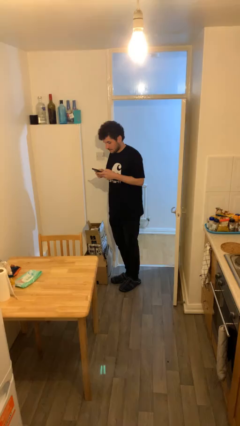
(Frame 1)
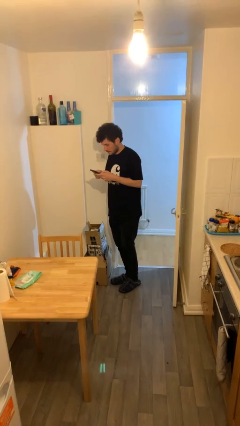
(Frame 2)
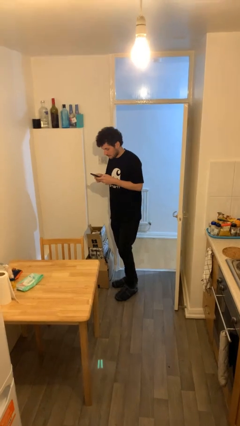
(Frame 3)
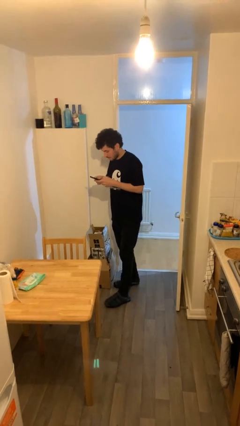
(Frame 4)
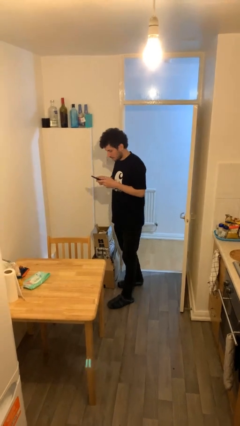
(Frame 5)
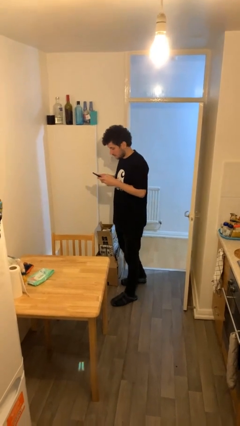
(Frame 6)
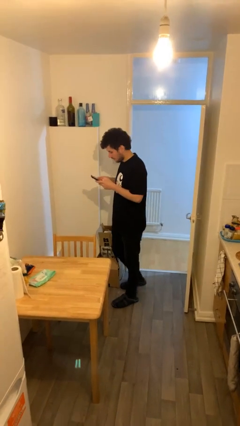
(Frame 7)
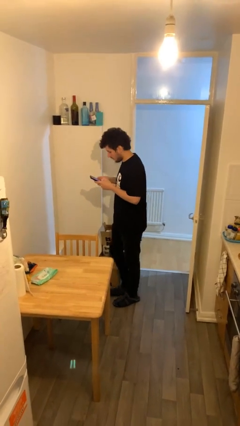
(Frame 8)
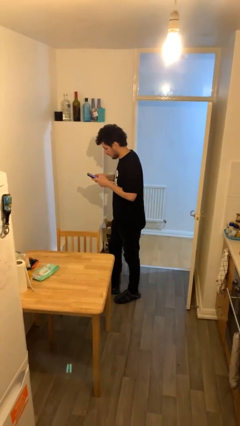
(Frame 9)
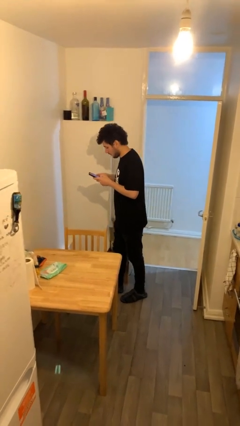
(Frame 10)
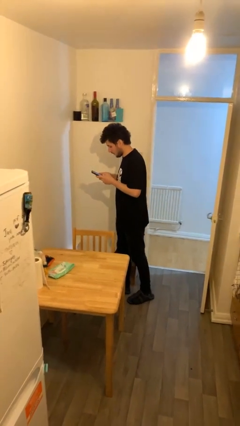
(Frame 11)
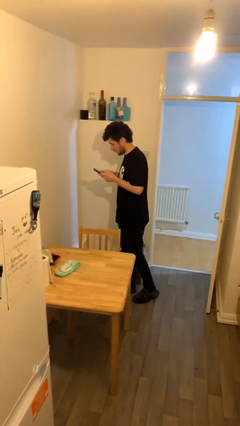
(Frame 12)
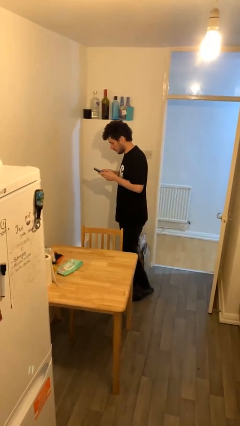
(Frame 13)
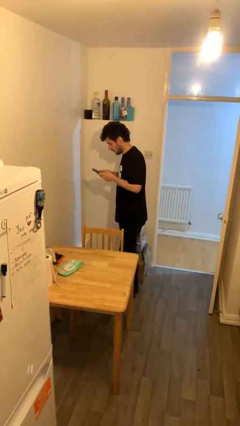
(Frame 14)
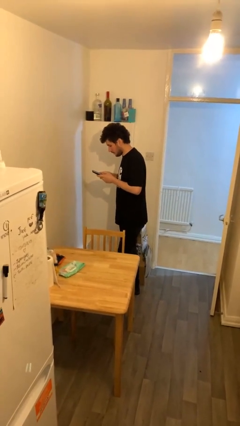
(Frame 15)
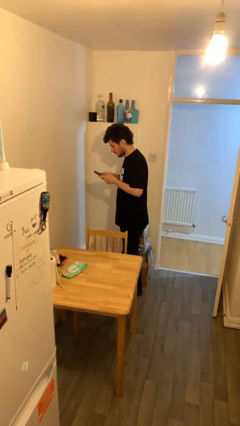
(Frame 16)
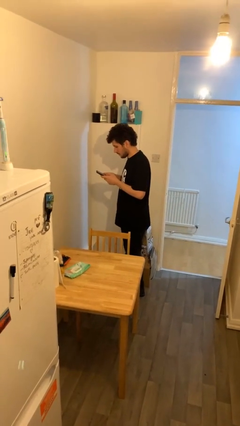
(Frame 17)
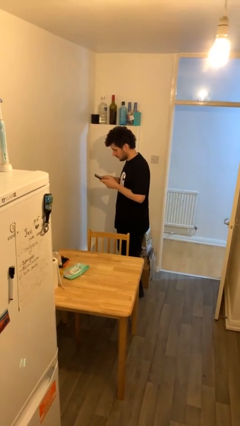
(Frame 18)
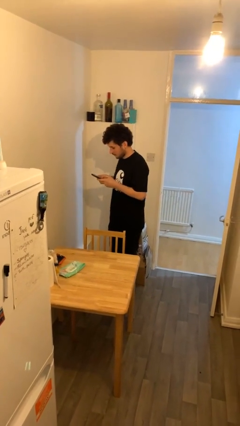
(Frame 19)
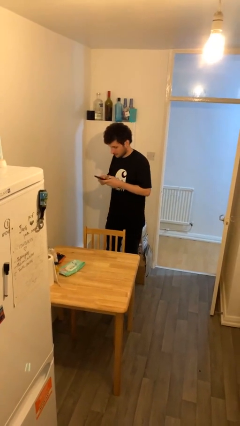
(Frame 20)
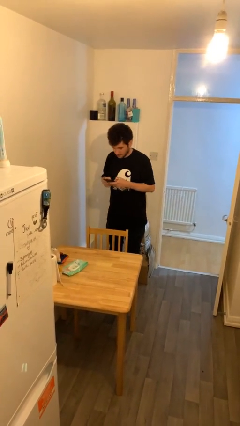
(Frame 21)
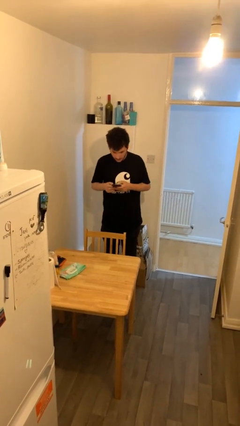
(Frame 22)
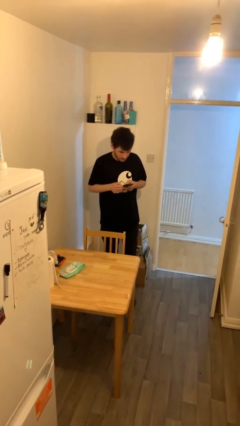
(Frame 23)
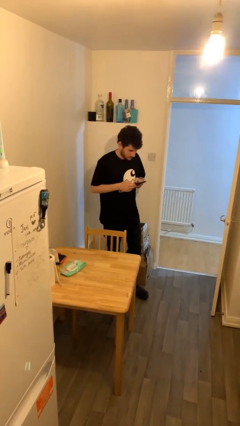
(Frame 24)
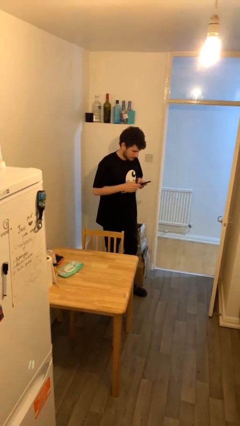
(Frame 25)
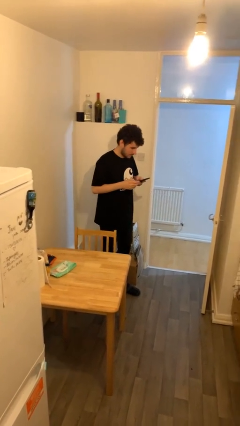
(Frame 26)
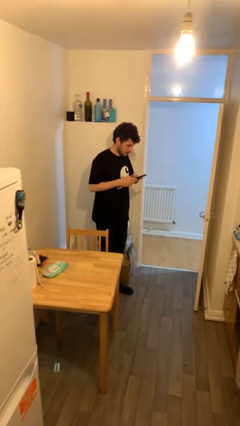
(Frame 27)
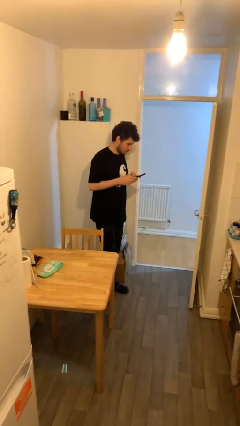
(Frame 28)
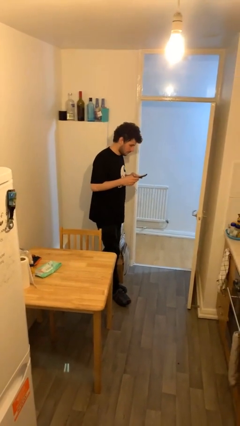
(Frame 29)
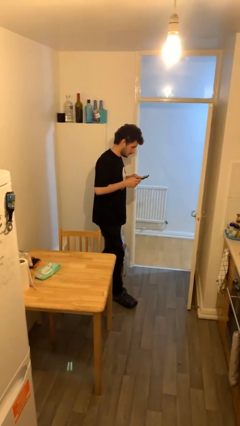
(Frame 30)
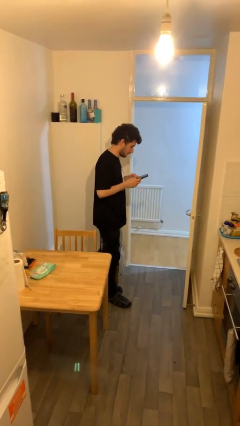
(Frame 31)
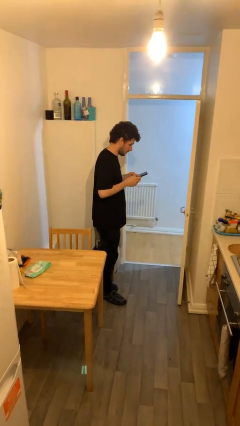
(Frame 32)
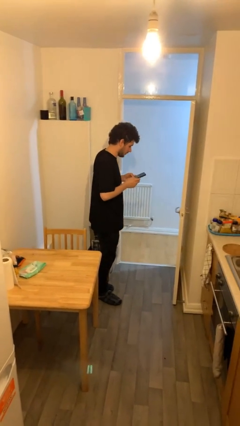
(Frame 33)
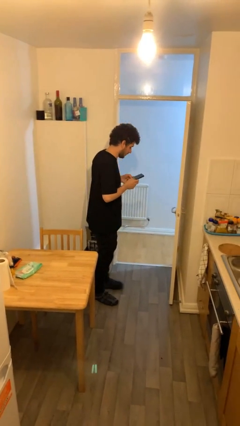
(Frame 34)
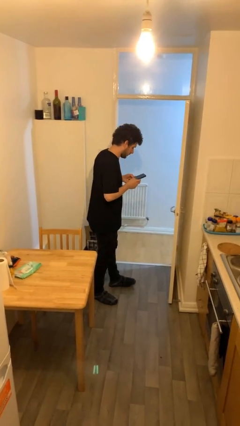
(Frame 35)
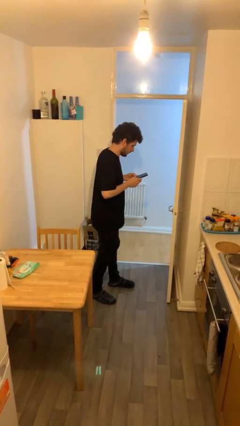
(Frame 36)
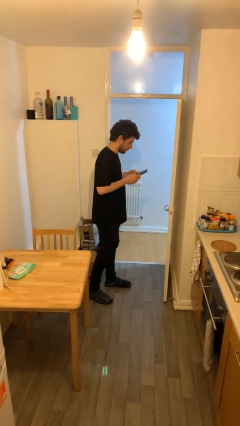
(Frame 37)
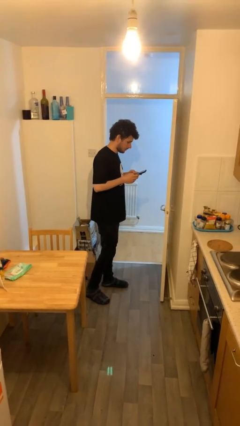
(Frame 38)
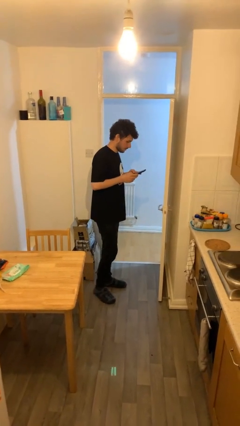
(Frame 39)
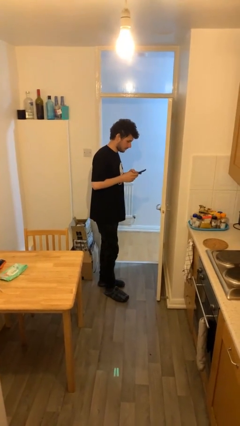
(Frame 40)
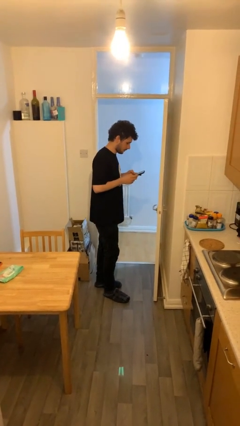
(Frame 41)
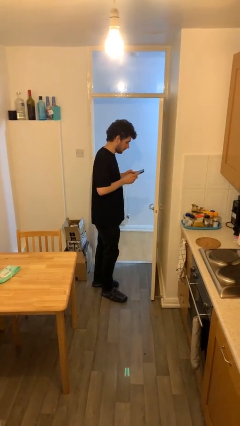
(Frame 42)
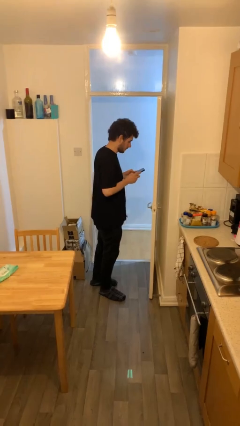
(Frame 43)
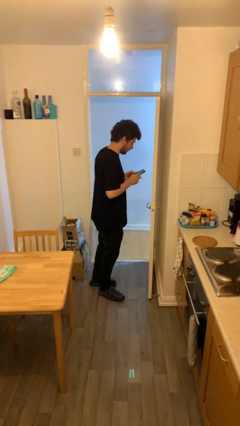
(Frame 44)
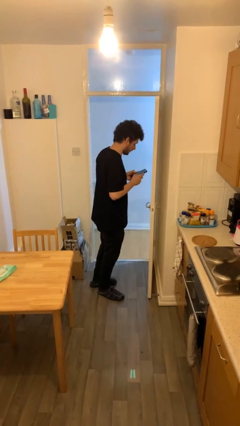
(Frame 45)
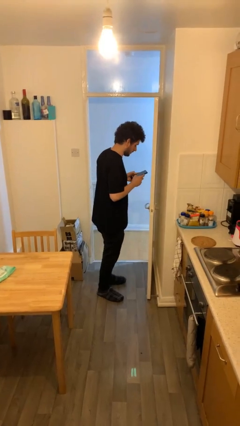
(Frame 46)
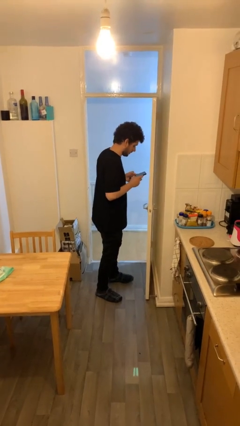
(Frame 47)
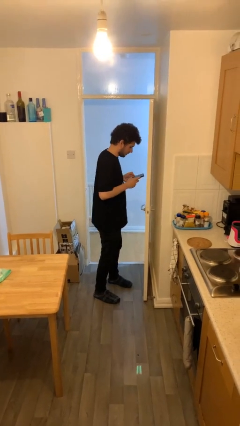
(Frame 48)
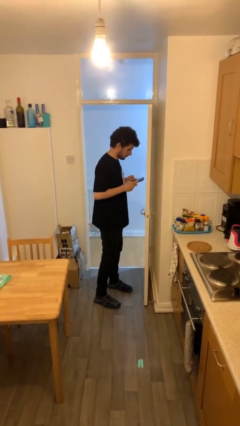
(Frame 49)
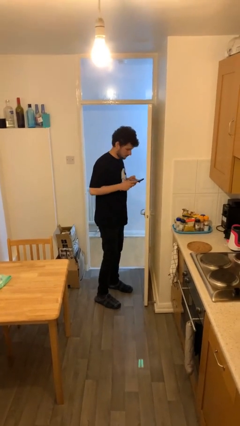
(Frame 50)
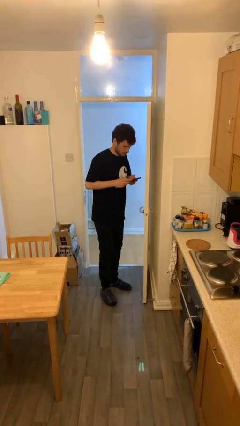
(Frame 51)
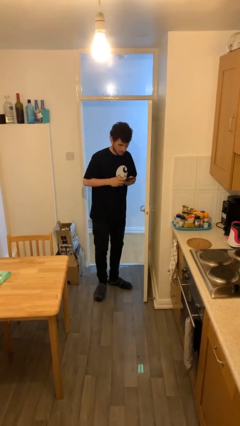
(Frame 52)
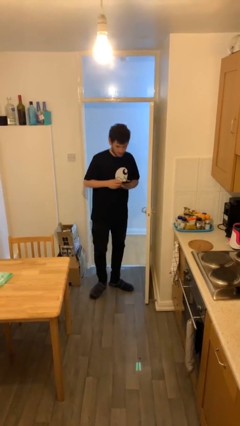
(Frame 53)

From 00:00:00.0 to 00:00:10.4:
person texts on phone

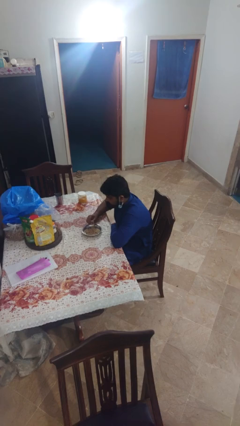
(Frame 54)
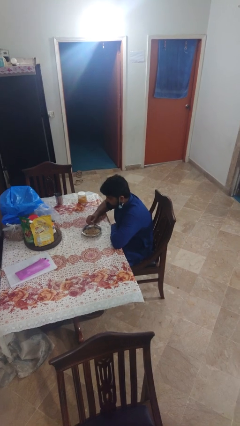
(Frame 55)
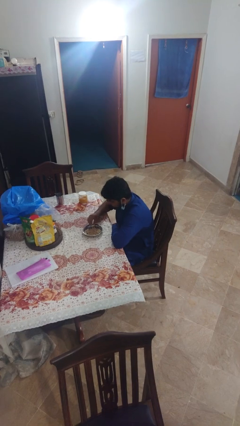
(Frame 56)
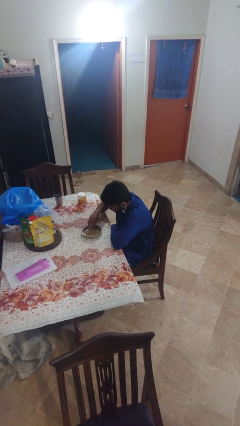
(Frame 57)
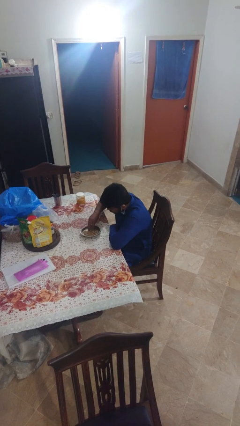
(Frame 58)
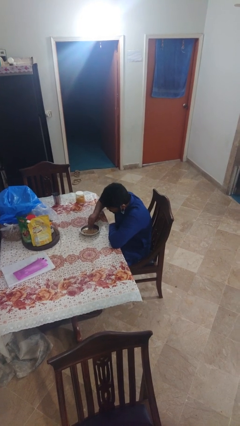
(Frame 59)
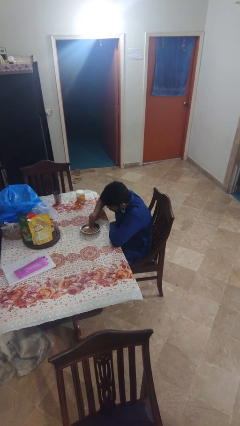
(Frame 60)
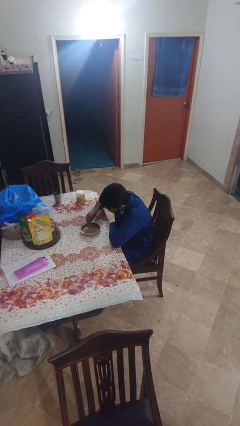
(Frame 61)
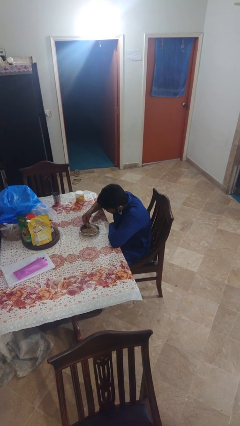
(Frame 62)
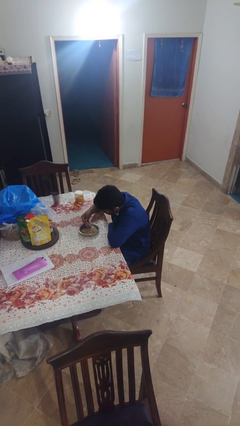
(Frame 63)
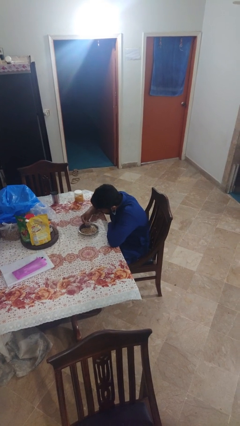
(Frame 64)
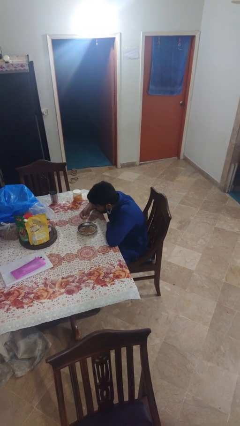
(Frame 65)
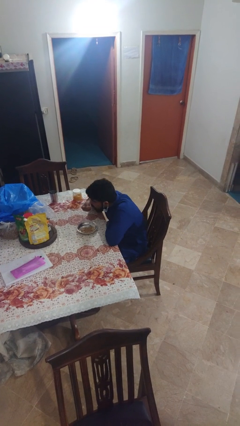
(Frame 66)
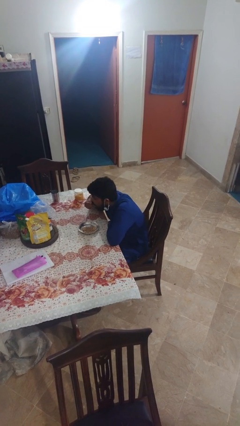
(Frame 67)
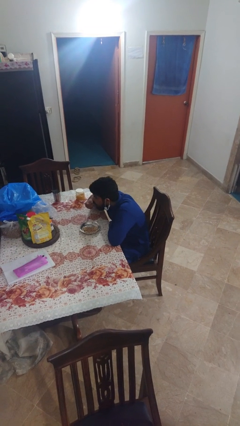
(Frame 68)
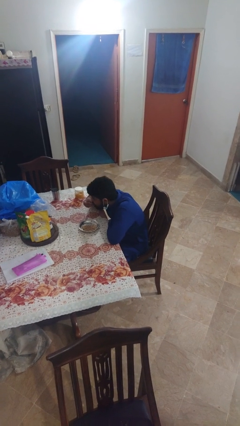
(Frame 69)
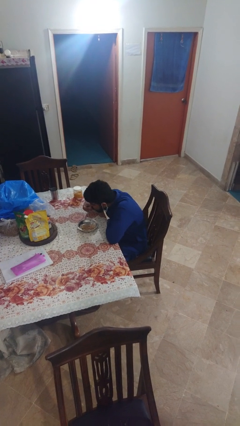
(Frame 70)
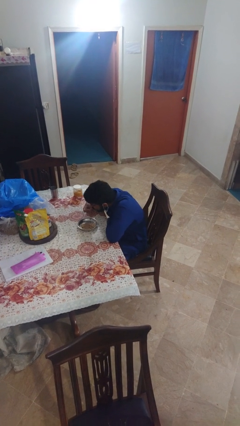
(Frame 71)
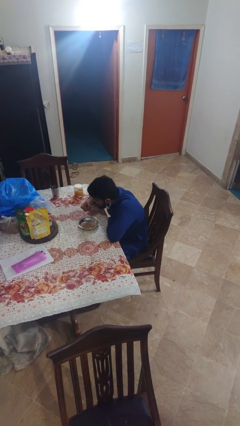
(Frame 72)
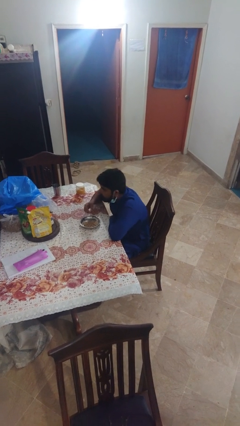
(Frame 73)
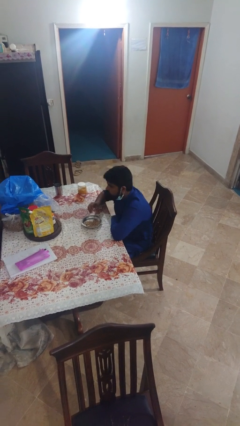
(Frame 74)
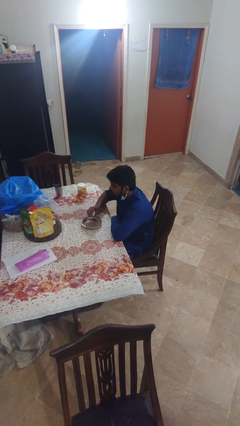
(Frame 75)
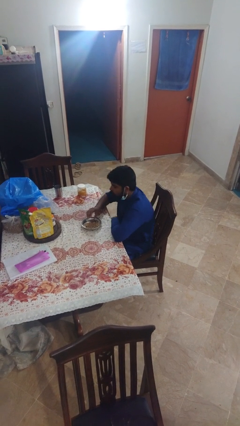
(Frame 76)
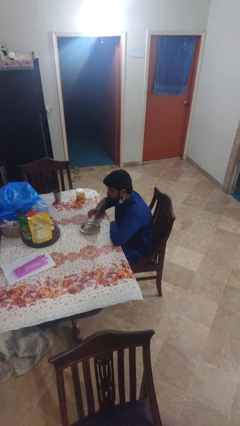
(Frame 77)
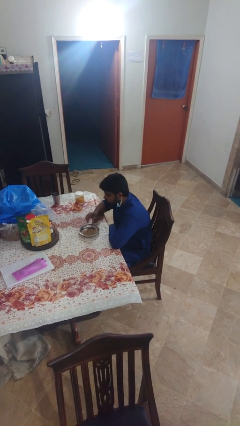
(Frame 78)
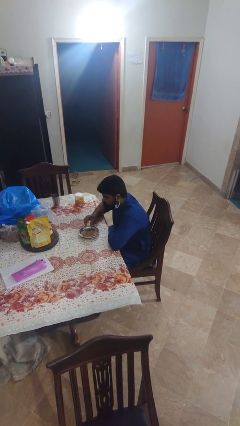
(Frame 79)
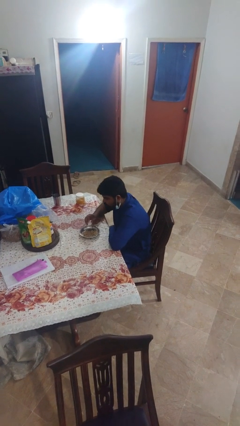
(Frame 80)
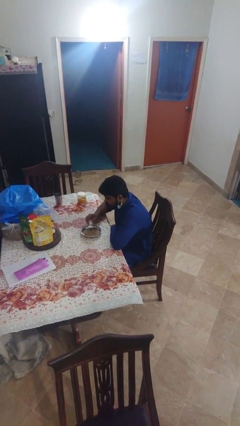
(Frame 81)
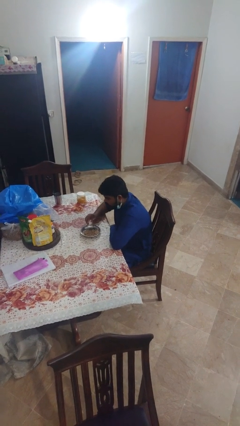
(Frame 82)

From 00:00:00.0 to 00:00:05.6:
person eats with hands

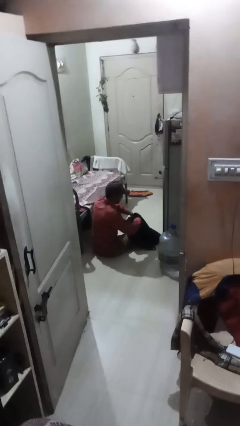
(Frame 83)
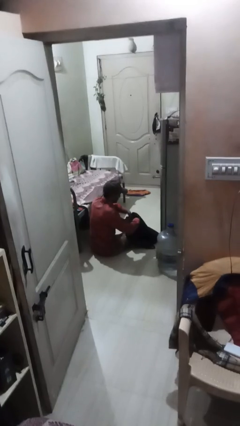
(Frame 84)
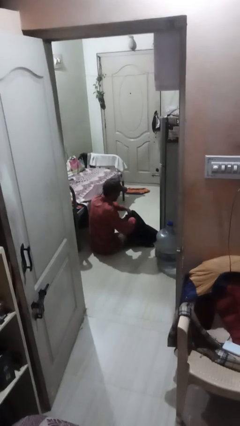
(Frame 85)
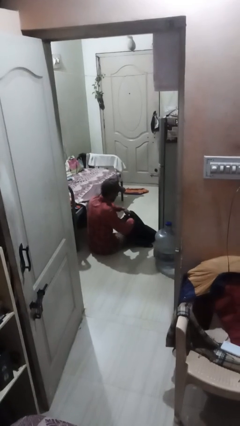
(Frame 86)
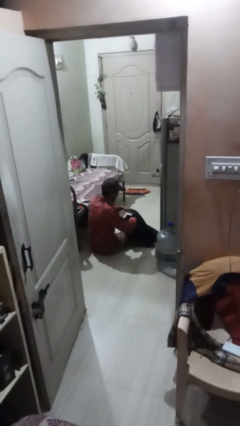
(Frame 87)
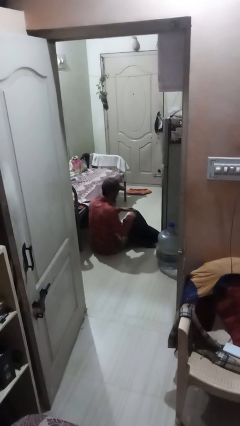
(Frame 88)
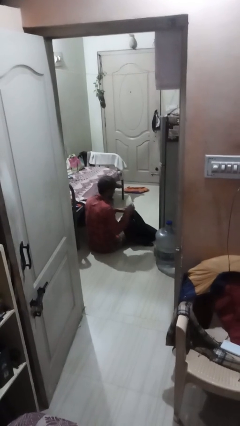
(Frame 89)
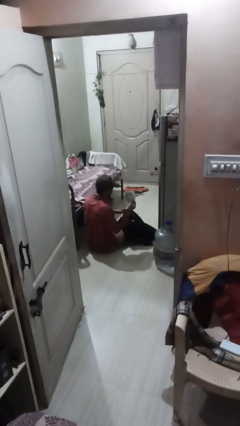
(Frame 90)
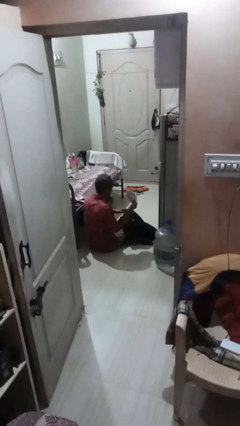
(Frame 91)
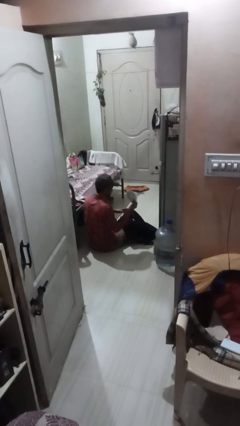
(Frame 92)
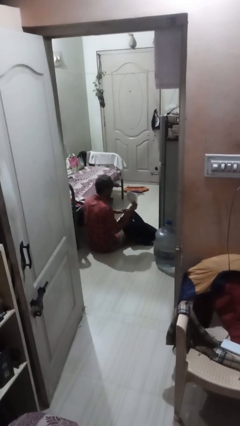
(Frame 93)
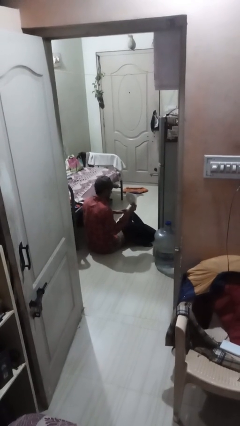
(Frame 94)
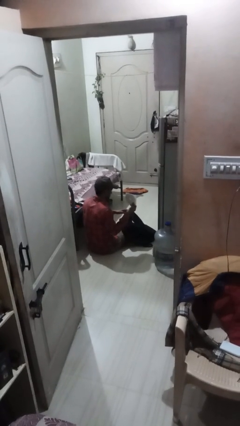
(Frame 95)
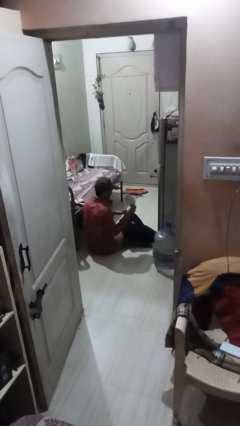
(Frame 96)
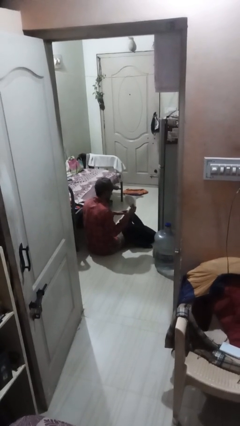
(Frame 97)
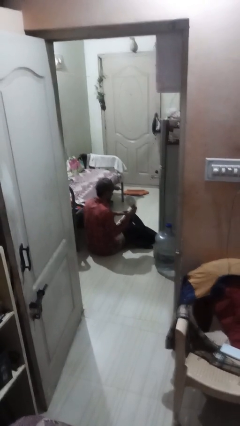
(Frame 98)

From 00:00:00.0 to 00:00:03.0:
person takes object from backpack
